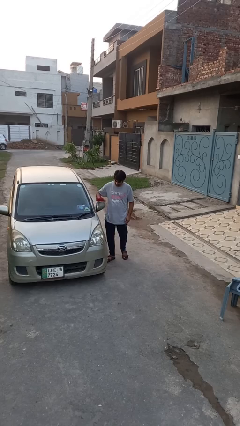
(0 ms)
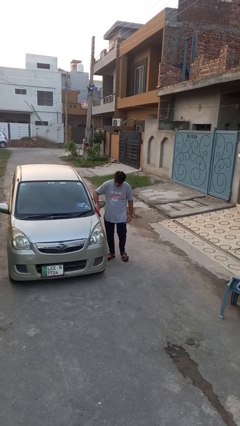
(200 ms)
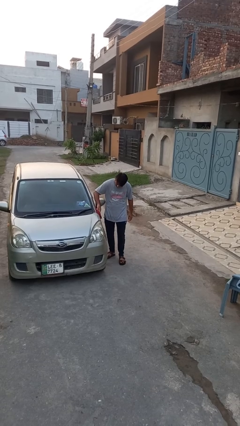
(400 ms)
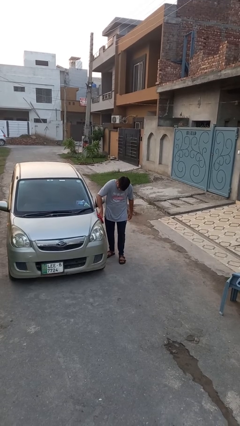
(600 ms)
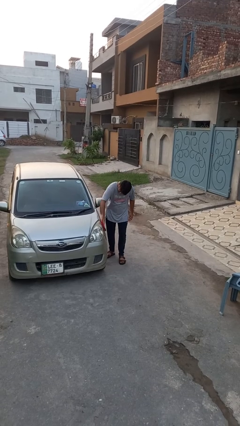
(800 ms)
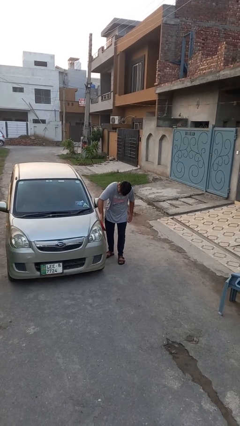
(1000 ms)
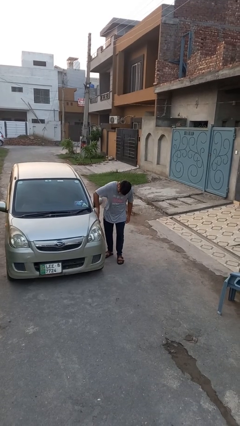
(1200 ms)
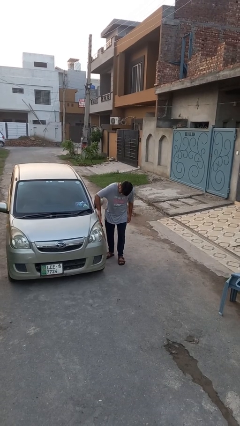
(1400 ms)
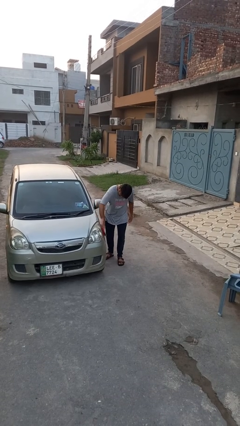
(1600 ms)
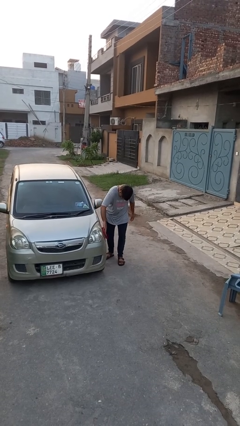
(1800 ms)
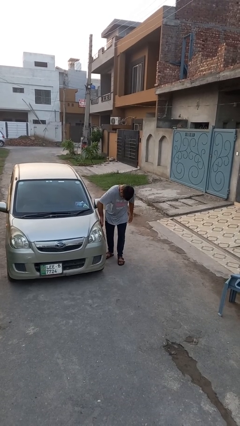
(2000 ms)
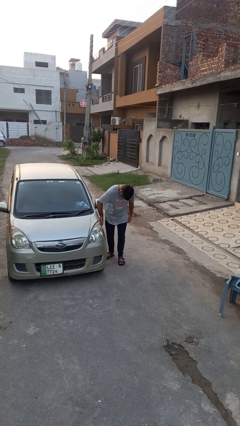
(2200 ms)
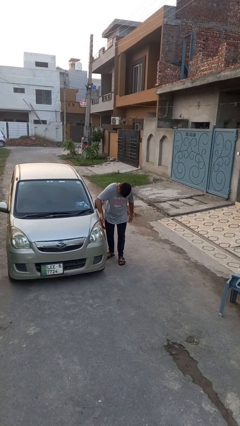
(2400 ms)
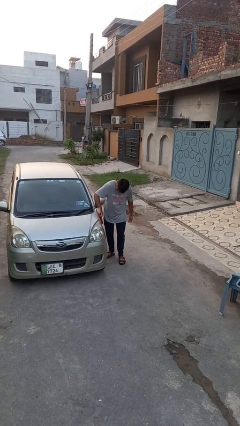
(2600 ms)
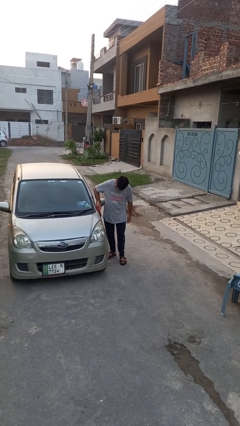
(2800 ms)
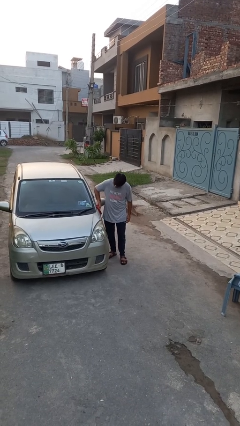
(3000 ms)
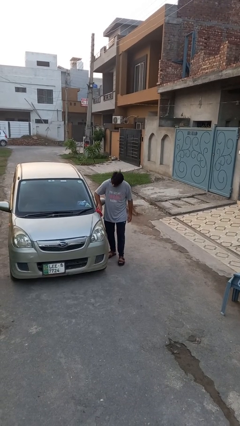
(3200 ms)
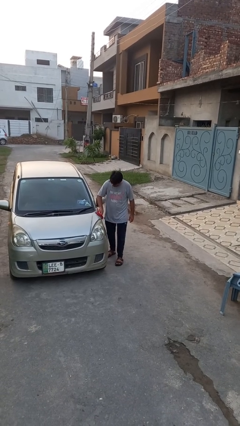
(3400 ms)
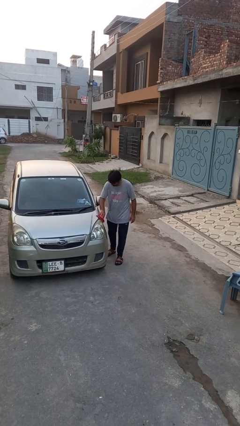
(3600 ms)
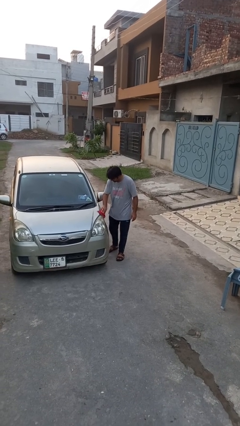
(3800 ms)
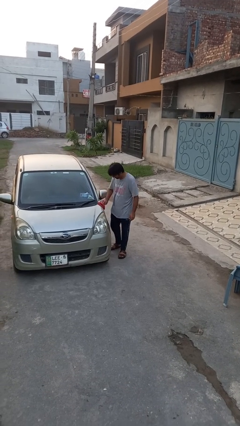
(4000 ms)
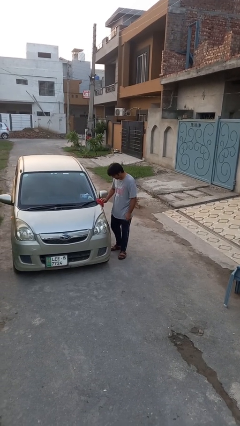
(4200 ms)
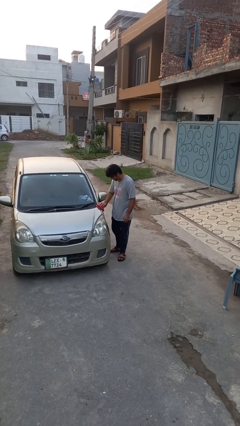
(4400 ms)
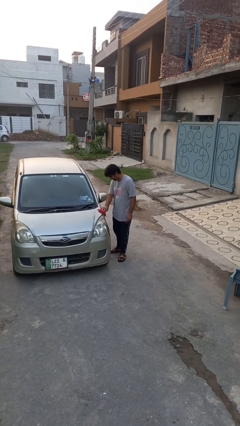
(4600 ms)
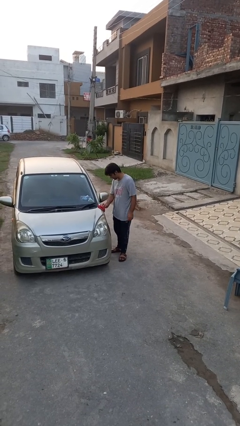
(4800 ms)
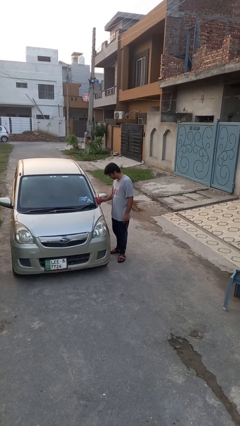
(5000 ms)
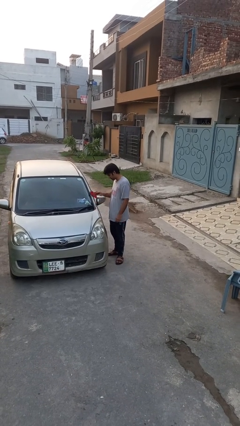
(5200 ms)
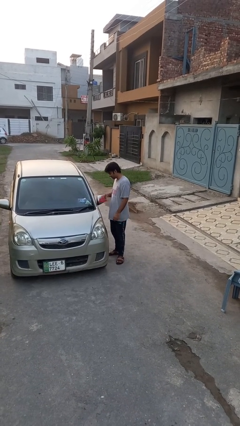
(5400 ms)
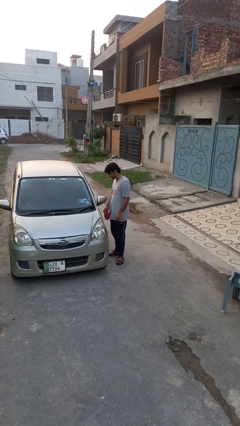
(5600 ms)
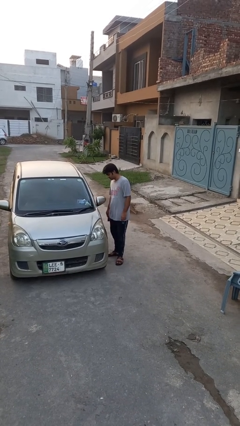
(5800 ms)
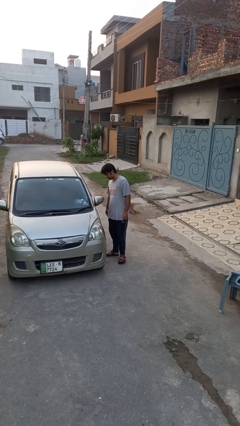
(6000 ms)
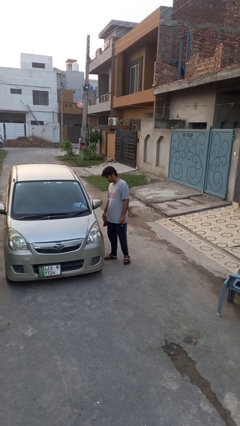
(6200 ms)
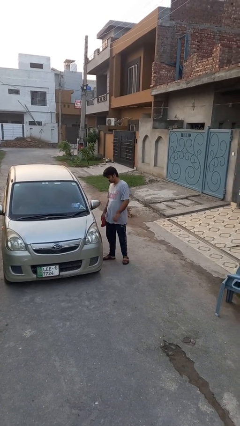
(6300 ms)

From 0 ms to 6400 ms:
person polishes car with rag

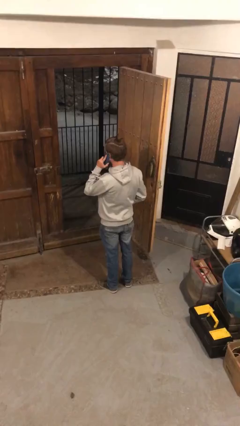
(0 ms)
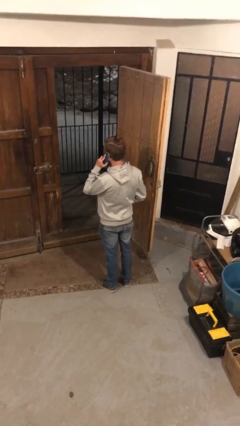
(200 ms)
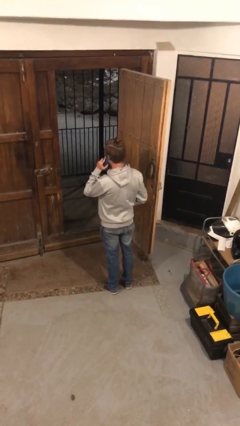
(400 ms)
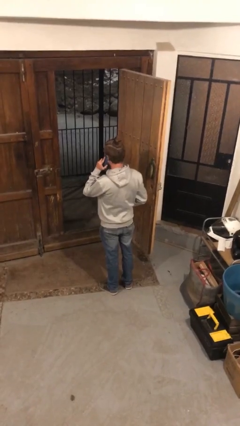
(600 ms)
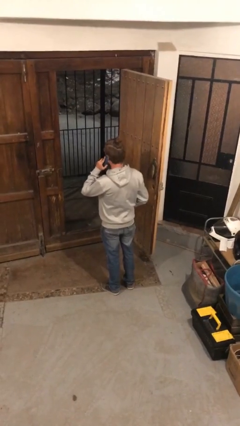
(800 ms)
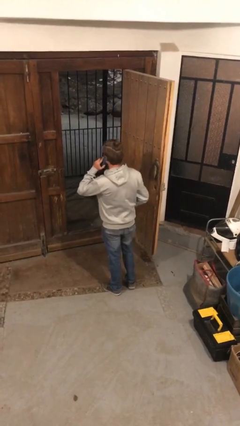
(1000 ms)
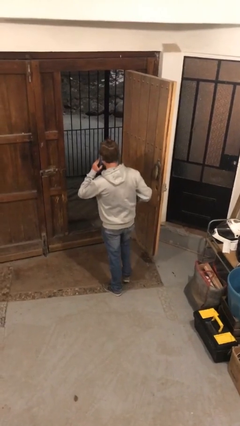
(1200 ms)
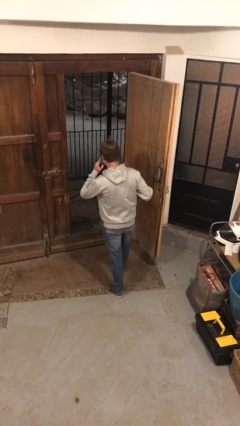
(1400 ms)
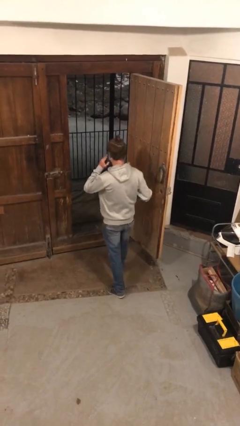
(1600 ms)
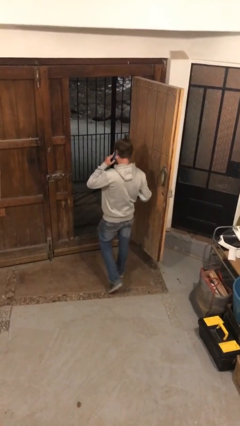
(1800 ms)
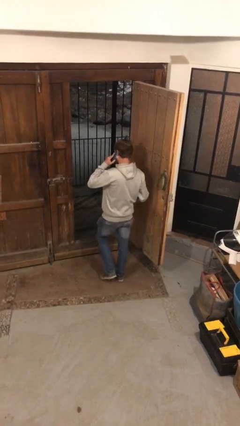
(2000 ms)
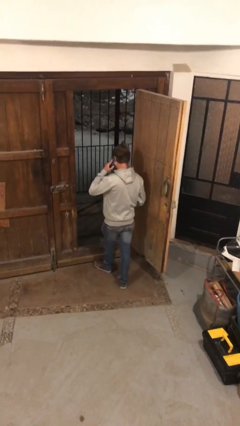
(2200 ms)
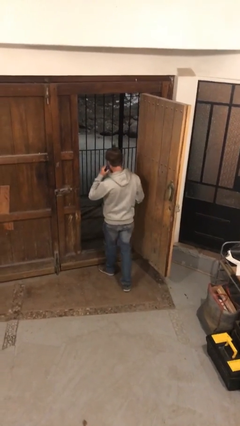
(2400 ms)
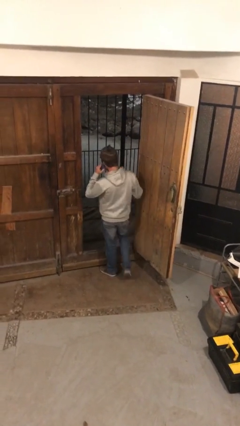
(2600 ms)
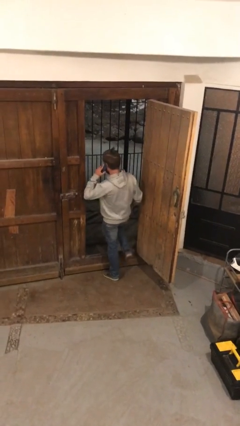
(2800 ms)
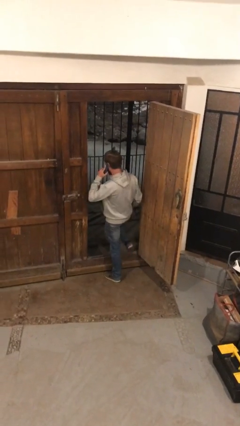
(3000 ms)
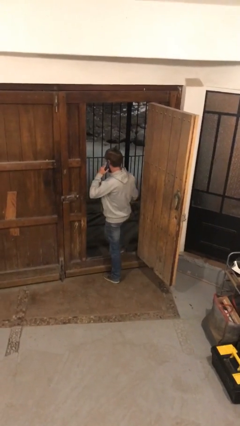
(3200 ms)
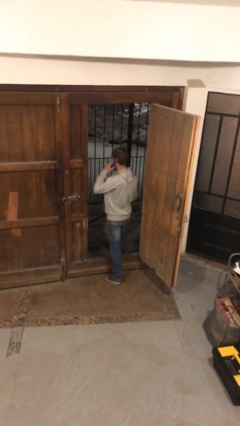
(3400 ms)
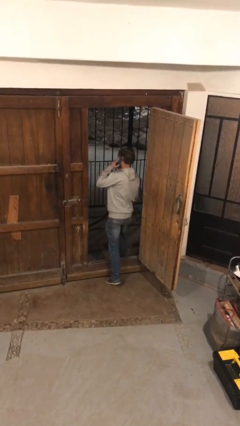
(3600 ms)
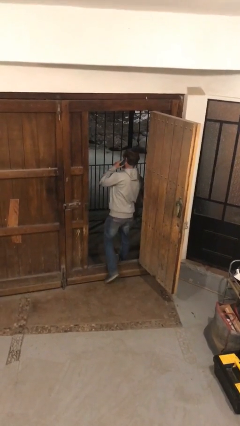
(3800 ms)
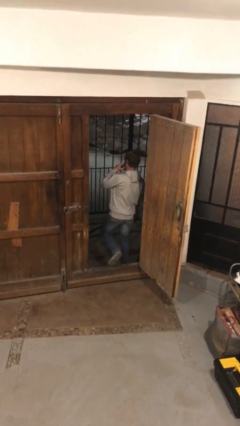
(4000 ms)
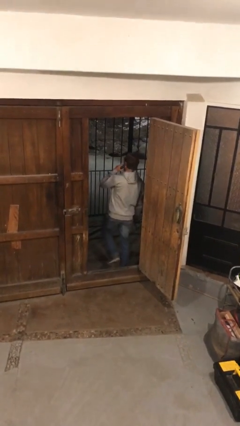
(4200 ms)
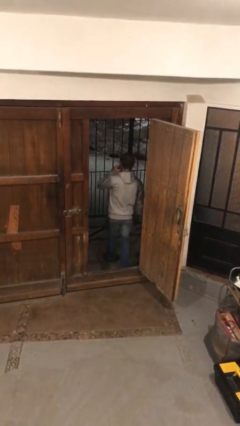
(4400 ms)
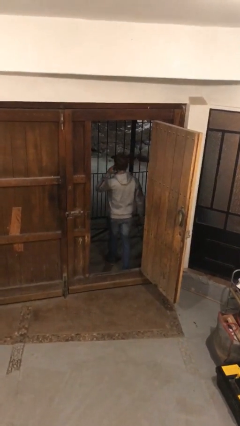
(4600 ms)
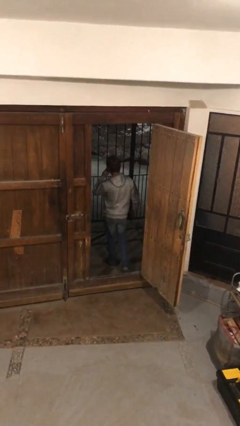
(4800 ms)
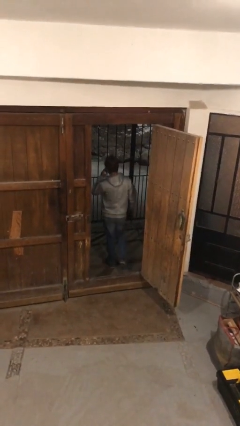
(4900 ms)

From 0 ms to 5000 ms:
person exits scene through structure

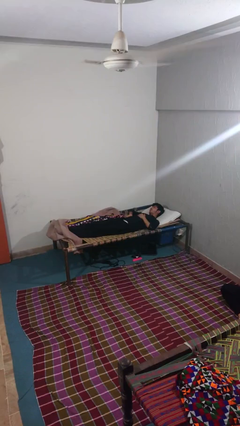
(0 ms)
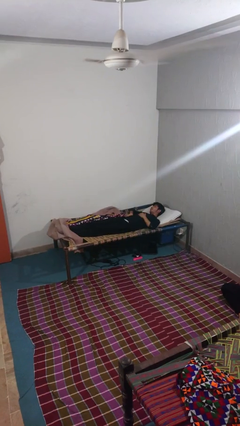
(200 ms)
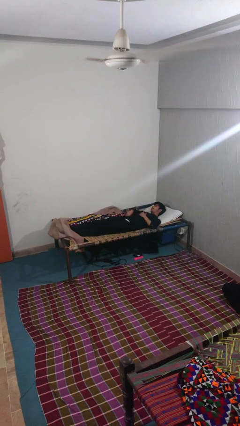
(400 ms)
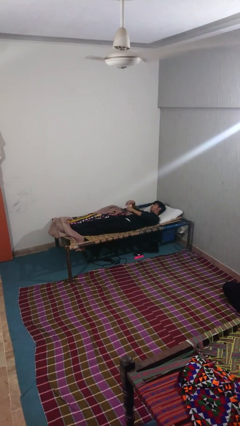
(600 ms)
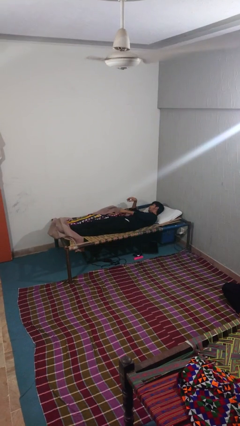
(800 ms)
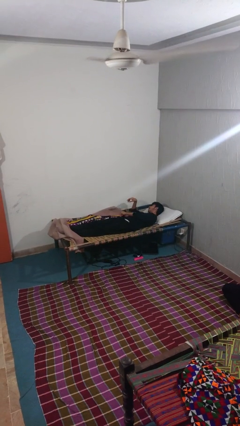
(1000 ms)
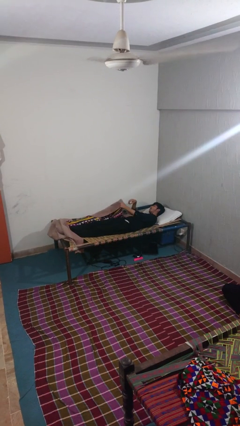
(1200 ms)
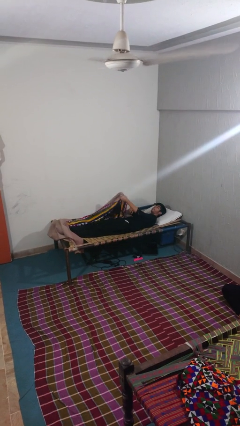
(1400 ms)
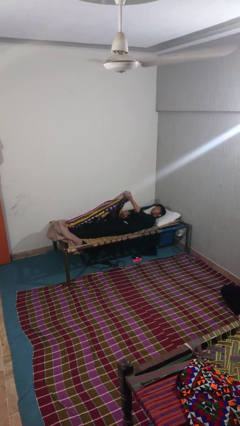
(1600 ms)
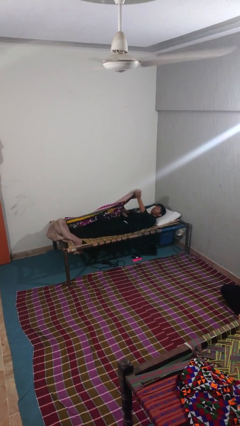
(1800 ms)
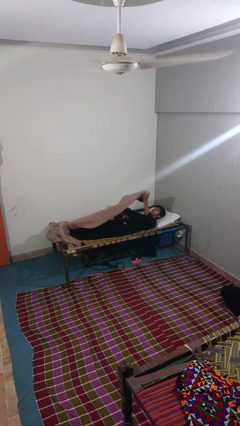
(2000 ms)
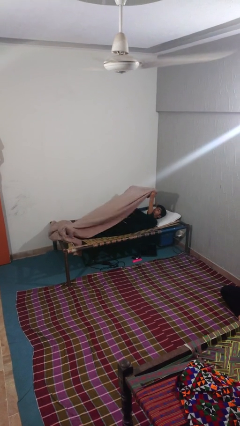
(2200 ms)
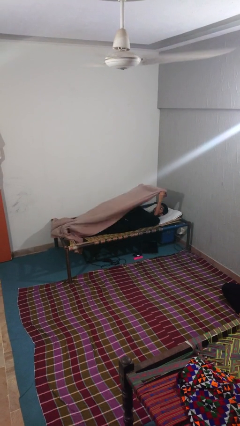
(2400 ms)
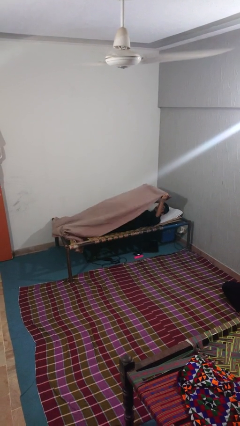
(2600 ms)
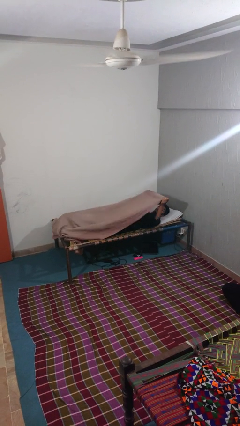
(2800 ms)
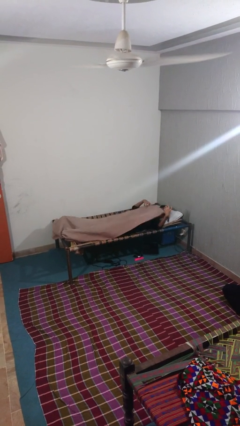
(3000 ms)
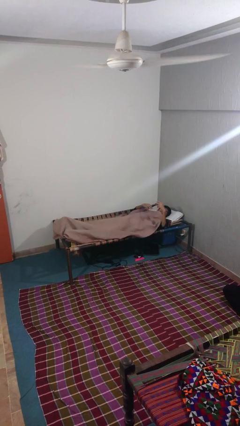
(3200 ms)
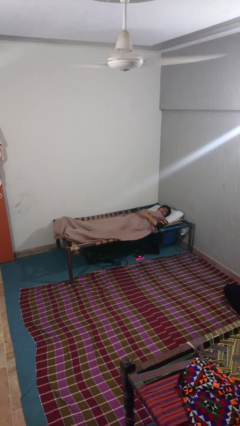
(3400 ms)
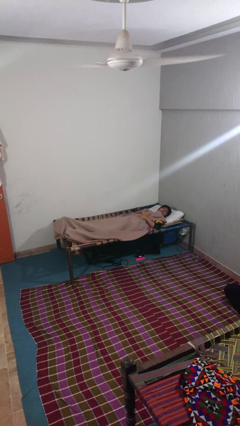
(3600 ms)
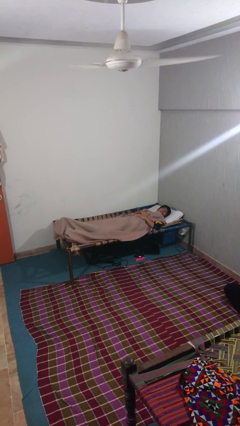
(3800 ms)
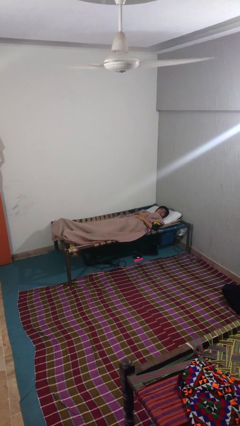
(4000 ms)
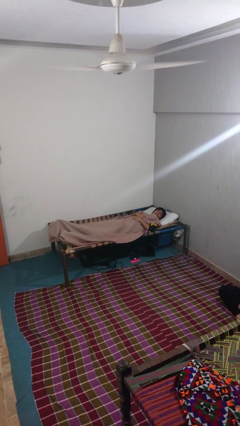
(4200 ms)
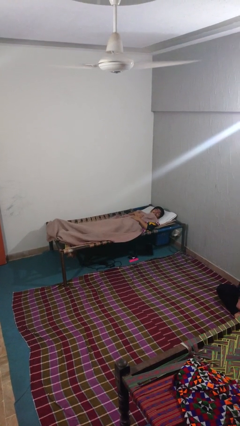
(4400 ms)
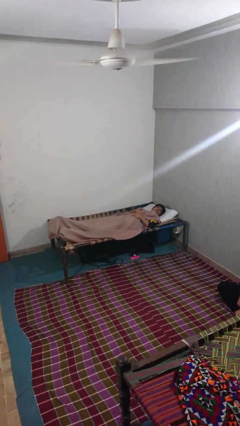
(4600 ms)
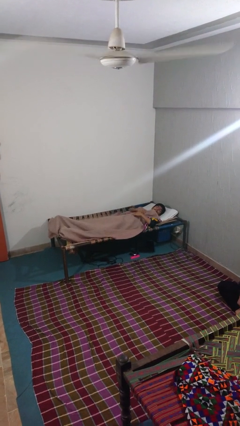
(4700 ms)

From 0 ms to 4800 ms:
person covers with blanket

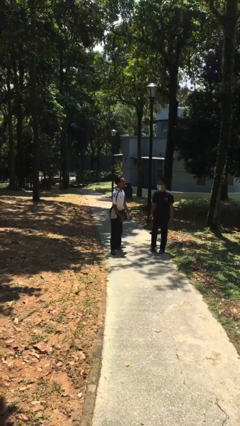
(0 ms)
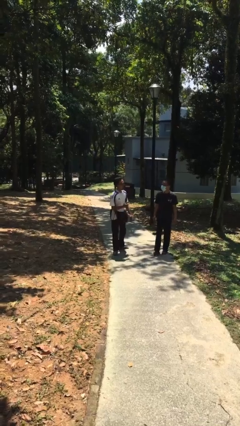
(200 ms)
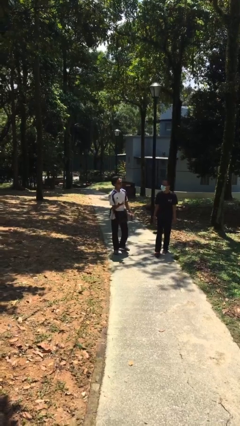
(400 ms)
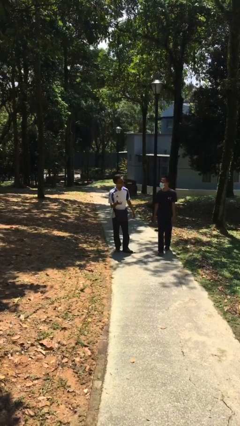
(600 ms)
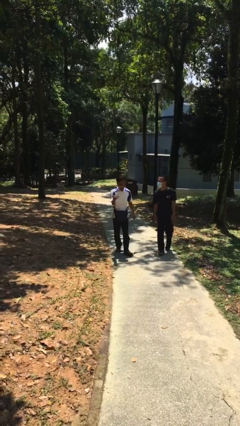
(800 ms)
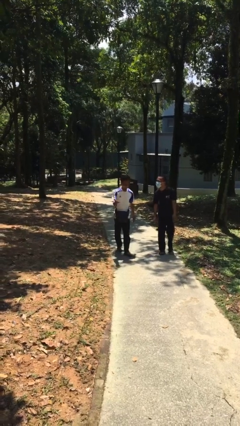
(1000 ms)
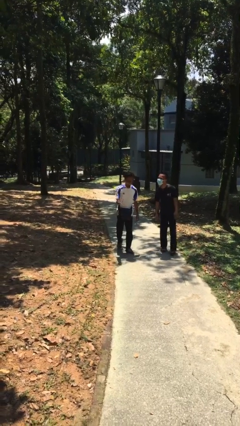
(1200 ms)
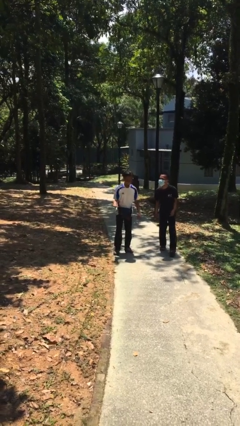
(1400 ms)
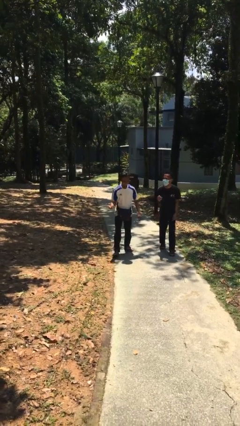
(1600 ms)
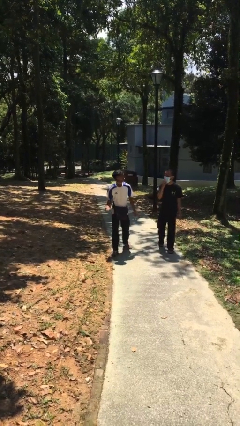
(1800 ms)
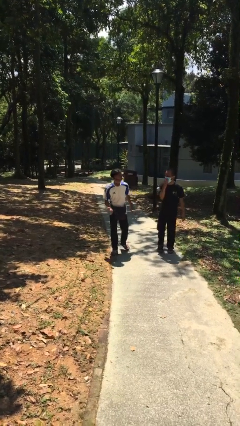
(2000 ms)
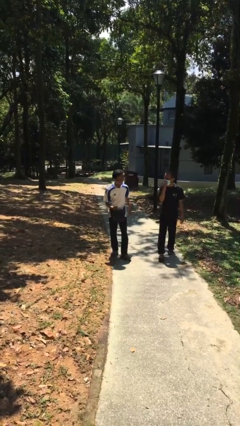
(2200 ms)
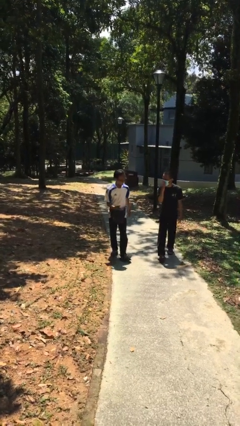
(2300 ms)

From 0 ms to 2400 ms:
person talks to person
